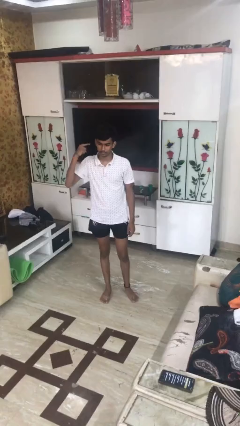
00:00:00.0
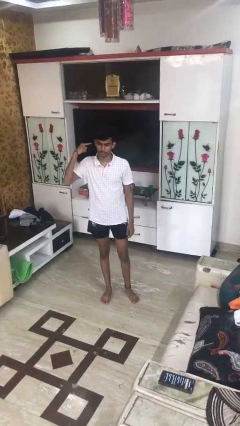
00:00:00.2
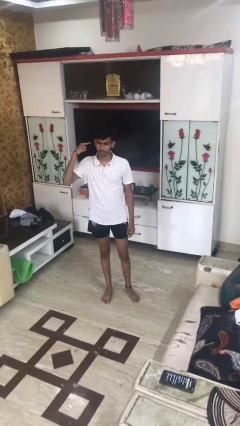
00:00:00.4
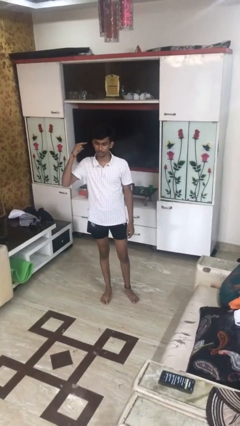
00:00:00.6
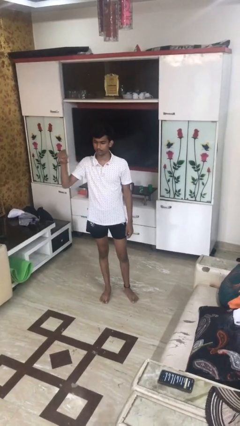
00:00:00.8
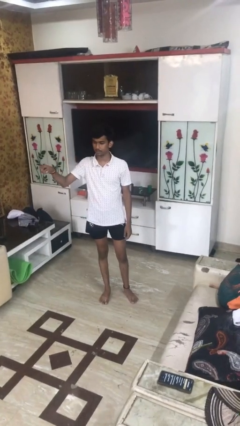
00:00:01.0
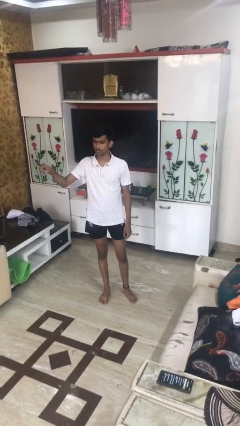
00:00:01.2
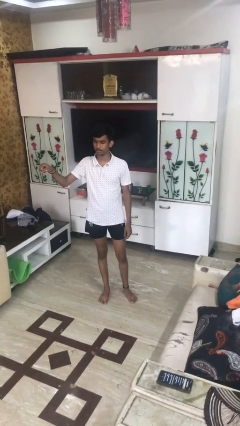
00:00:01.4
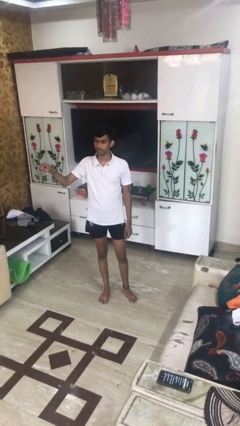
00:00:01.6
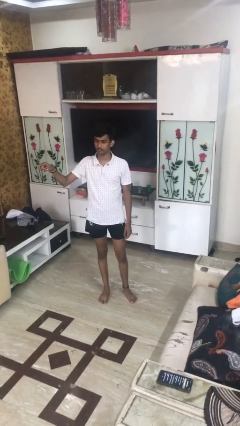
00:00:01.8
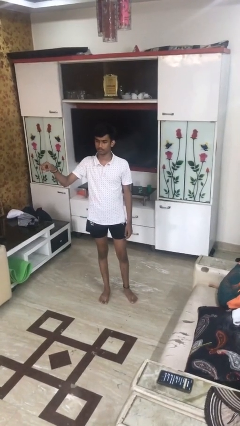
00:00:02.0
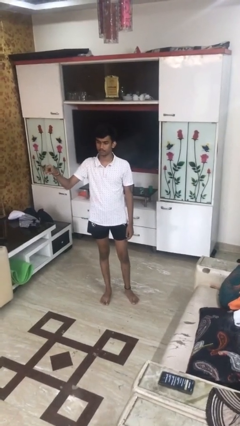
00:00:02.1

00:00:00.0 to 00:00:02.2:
person gestures listen closely

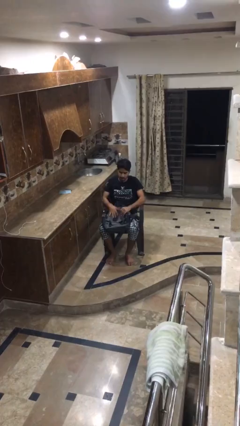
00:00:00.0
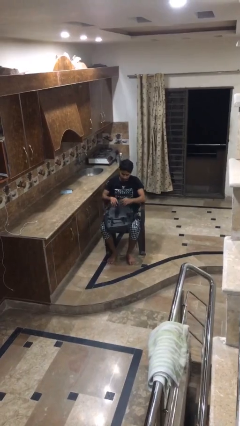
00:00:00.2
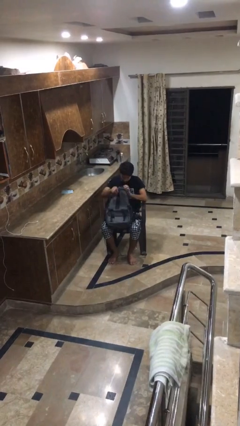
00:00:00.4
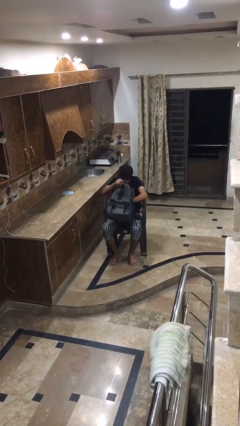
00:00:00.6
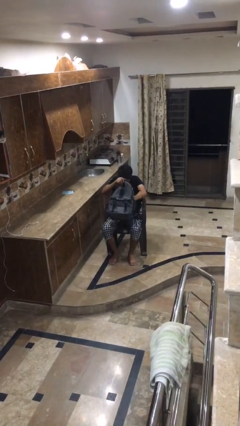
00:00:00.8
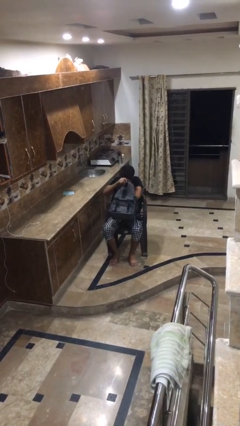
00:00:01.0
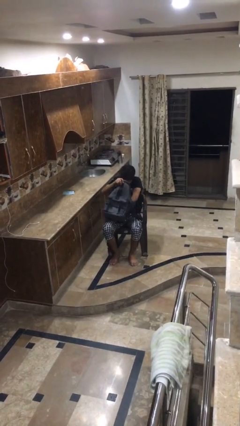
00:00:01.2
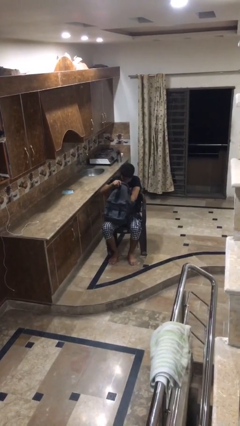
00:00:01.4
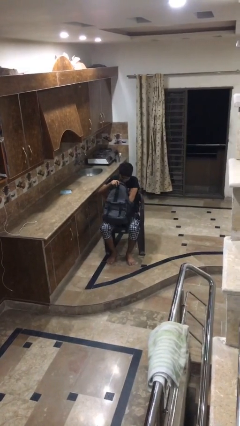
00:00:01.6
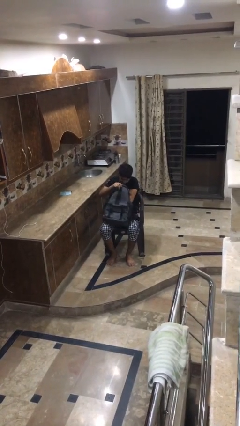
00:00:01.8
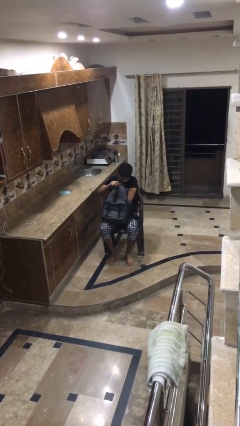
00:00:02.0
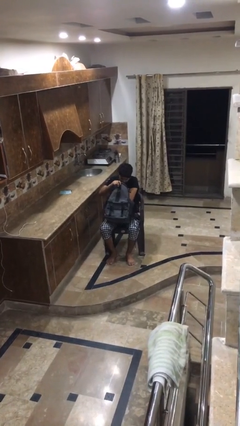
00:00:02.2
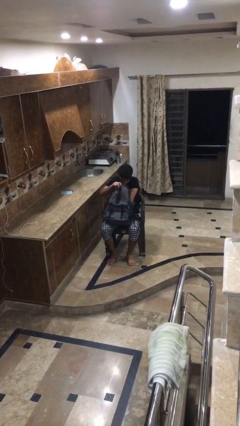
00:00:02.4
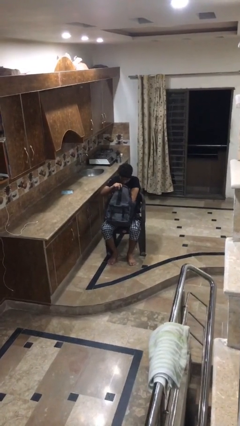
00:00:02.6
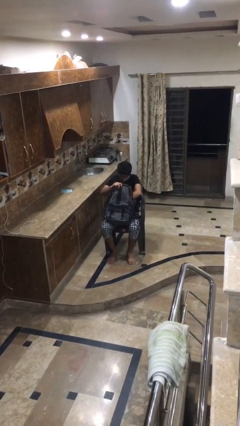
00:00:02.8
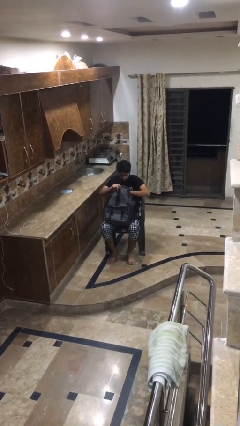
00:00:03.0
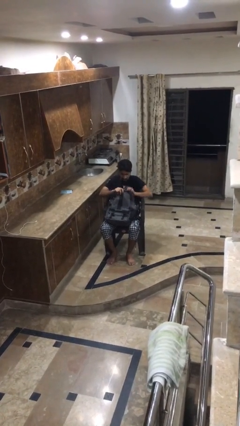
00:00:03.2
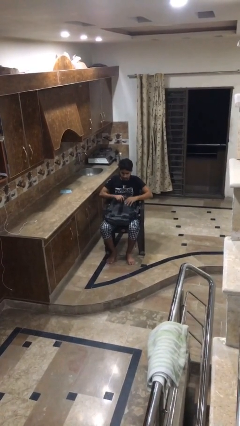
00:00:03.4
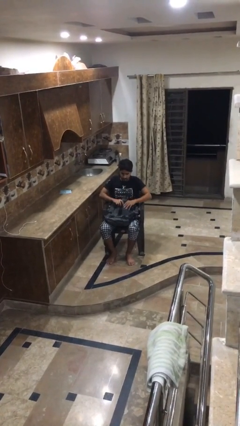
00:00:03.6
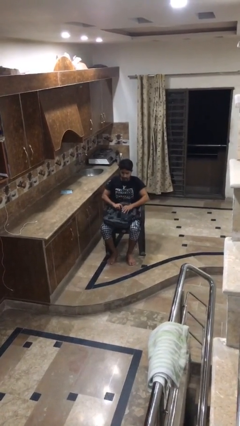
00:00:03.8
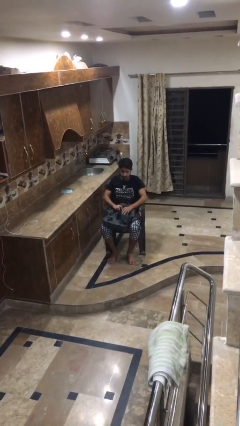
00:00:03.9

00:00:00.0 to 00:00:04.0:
person searches in bag

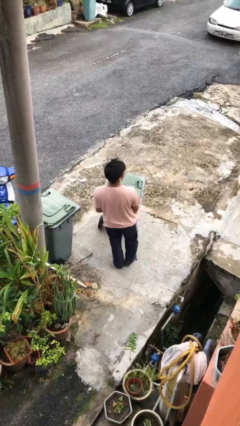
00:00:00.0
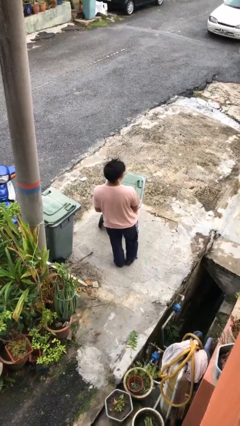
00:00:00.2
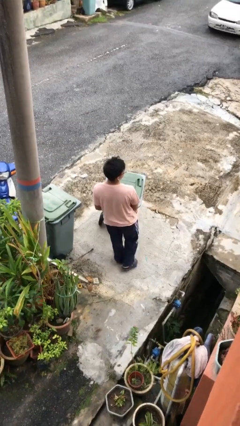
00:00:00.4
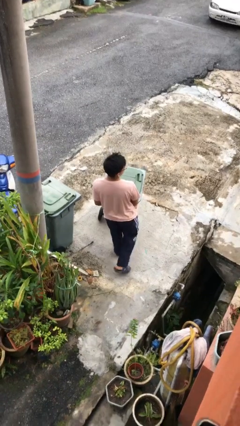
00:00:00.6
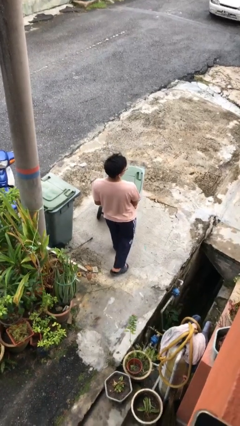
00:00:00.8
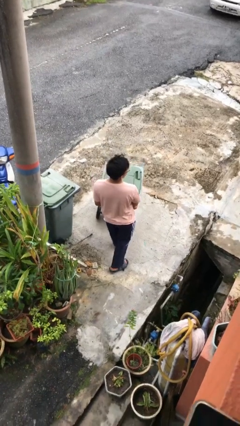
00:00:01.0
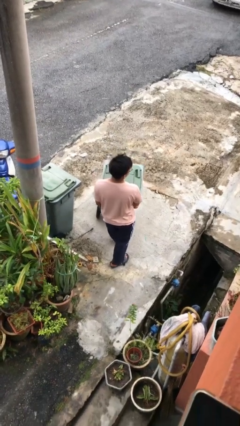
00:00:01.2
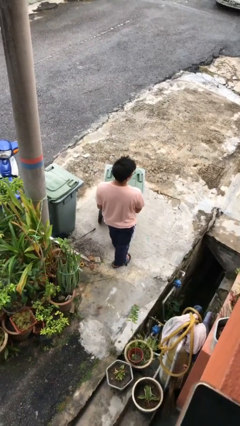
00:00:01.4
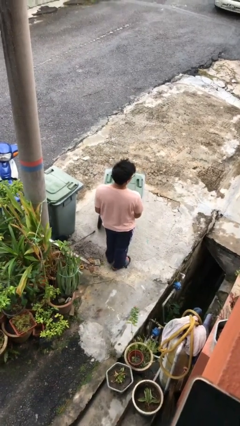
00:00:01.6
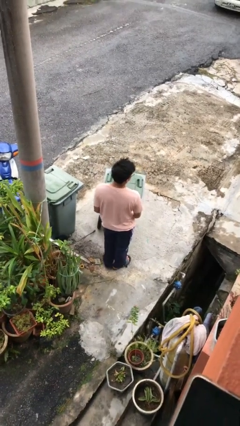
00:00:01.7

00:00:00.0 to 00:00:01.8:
person pulls wheeled trashcan

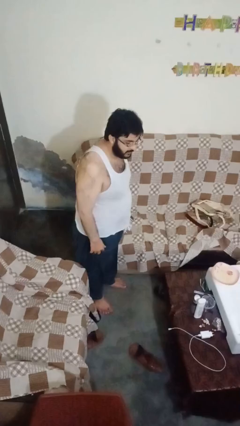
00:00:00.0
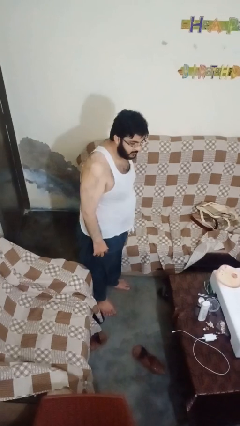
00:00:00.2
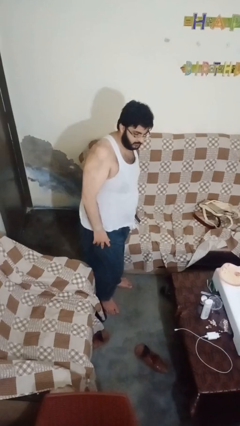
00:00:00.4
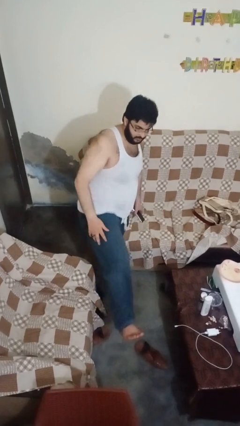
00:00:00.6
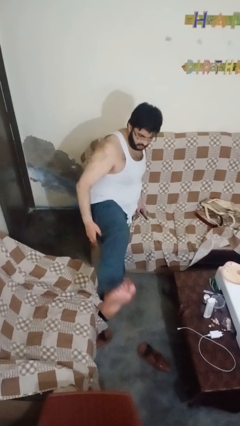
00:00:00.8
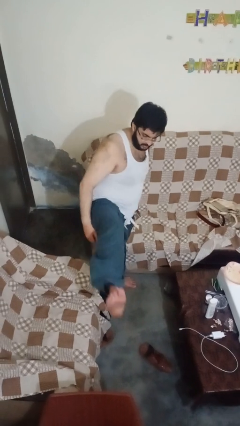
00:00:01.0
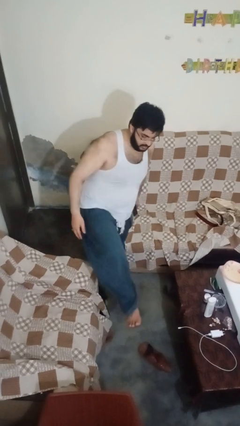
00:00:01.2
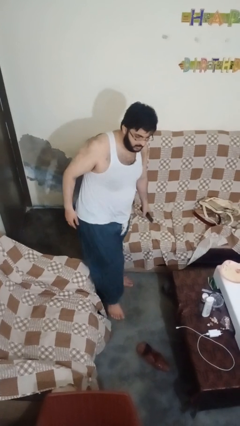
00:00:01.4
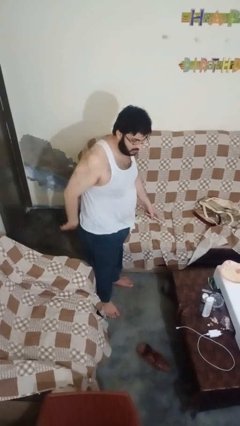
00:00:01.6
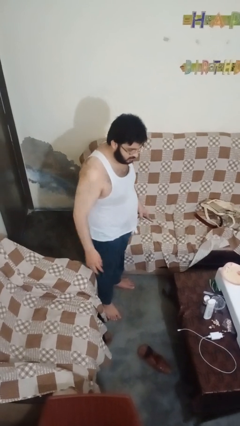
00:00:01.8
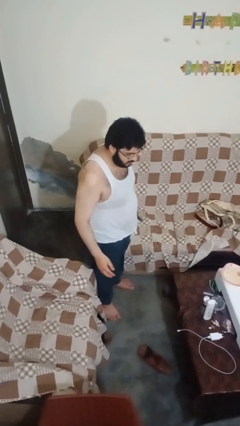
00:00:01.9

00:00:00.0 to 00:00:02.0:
person karate kicks

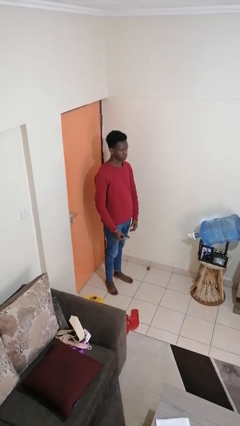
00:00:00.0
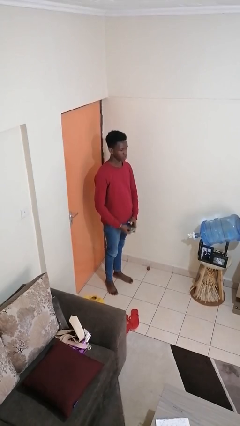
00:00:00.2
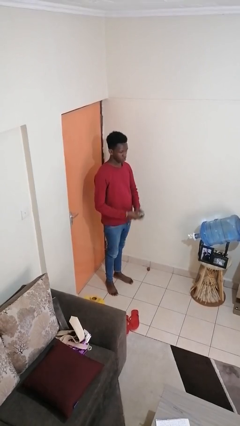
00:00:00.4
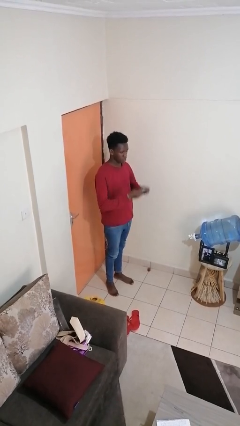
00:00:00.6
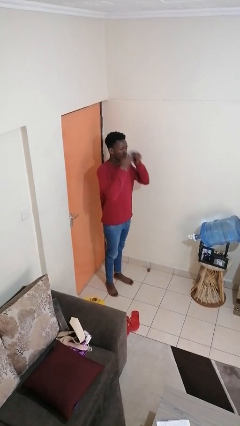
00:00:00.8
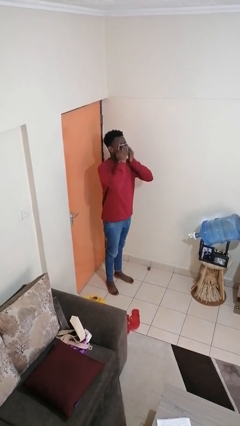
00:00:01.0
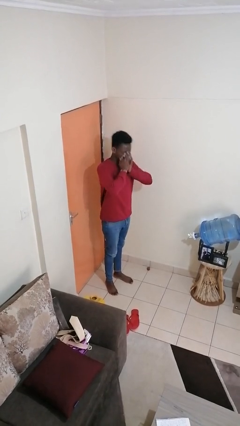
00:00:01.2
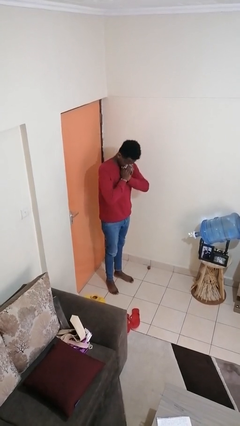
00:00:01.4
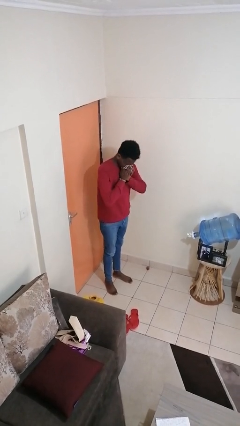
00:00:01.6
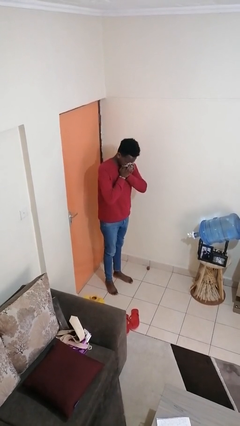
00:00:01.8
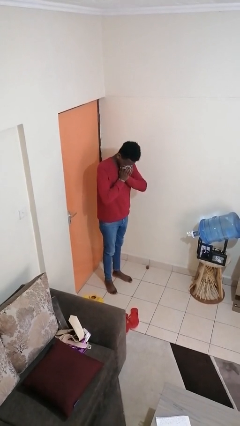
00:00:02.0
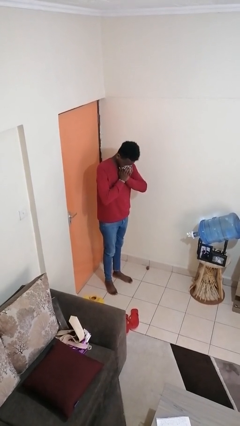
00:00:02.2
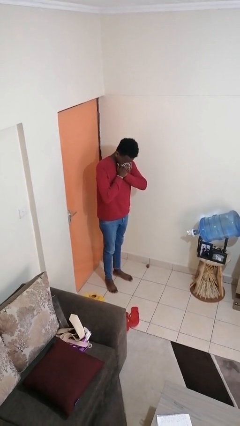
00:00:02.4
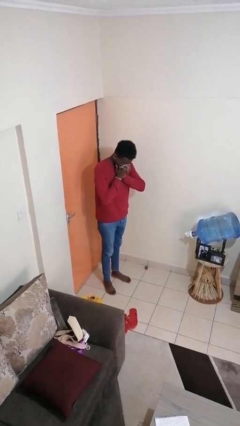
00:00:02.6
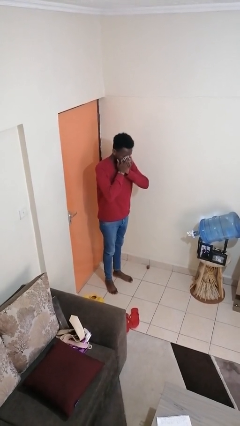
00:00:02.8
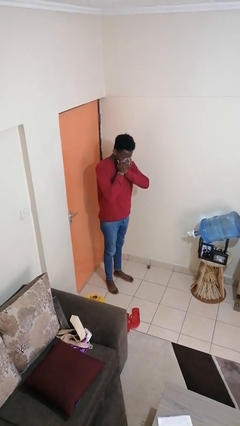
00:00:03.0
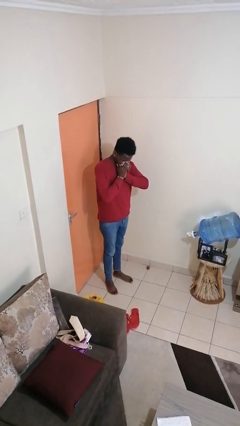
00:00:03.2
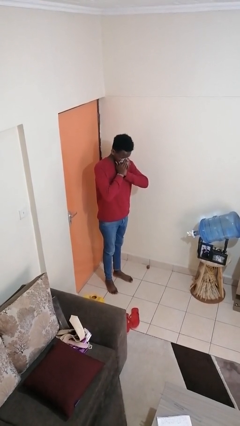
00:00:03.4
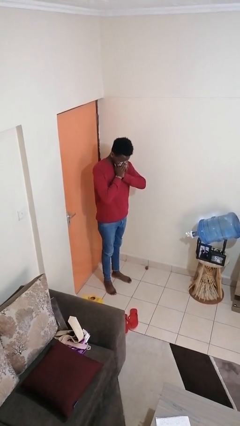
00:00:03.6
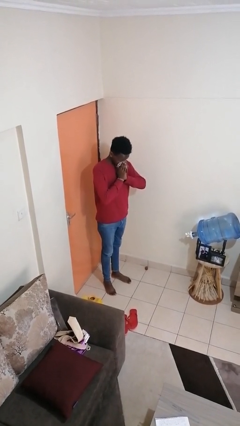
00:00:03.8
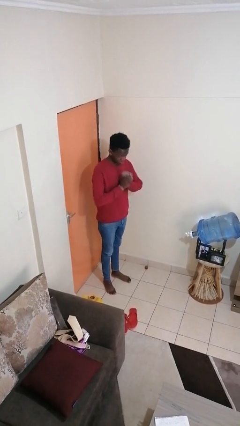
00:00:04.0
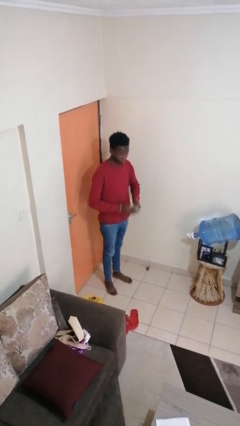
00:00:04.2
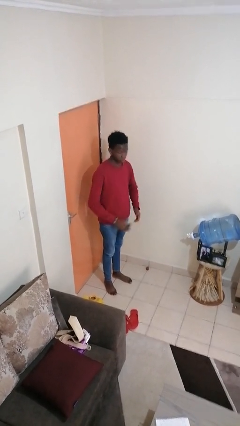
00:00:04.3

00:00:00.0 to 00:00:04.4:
person blows nose

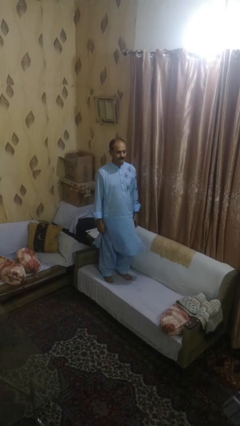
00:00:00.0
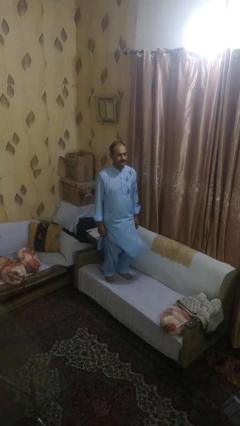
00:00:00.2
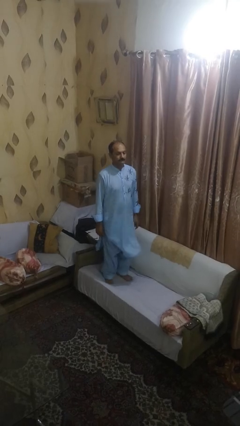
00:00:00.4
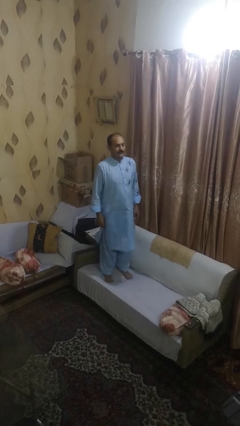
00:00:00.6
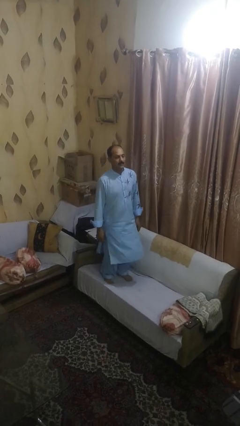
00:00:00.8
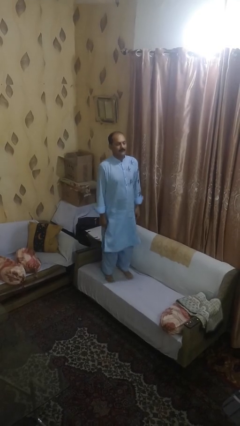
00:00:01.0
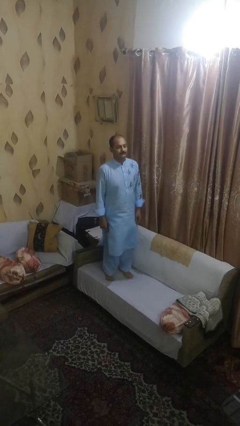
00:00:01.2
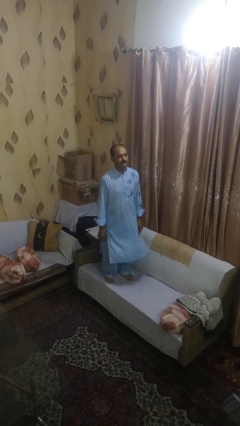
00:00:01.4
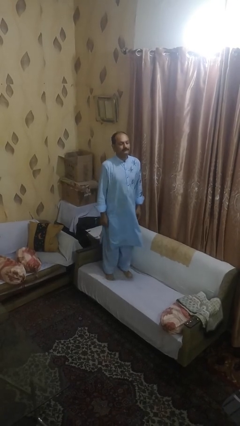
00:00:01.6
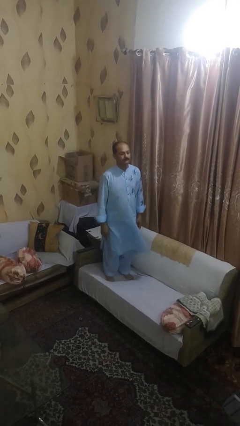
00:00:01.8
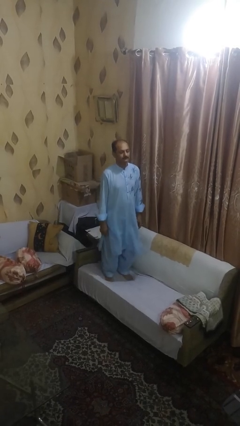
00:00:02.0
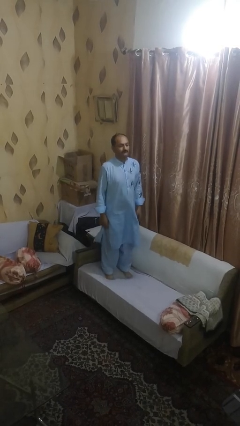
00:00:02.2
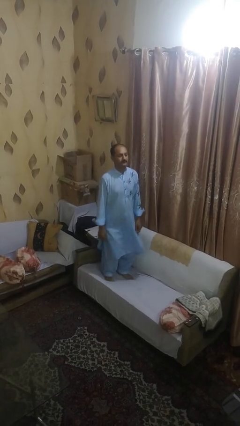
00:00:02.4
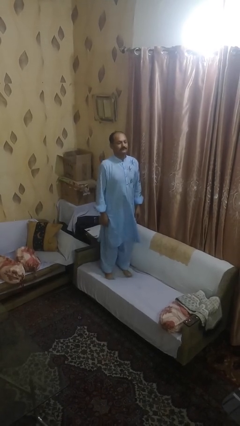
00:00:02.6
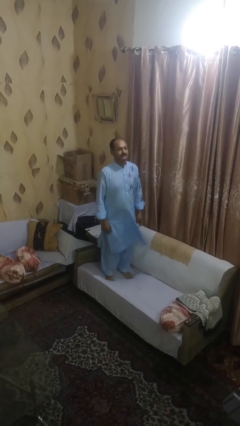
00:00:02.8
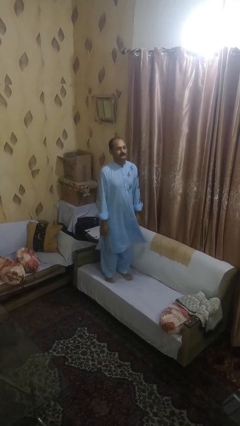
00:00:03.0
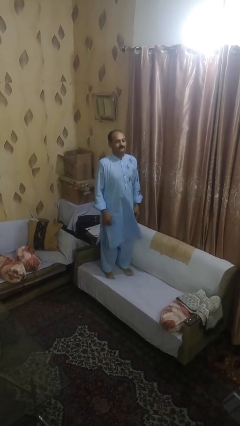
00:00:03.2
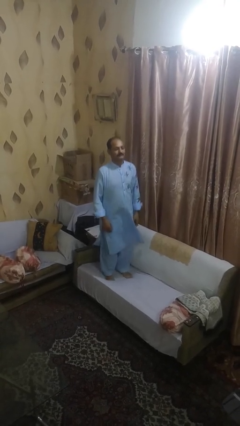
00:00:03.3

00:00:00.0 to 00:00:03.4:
person jumps on couch
